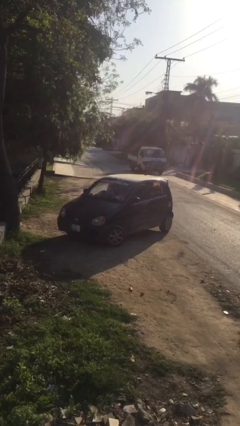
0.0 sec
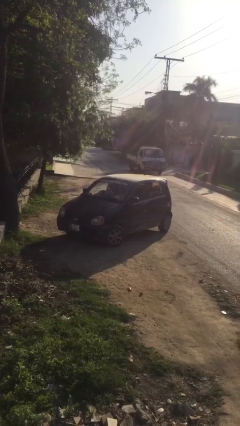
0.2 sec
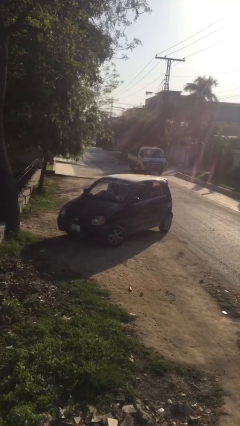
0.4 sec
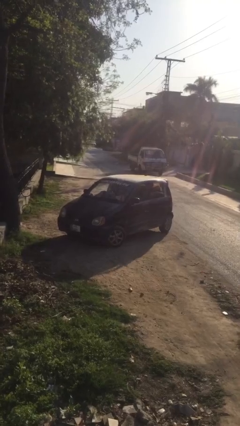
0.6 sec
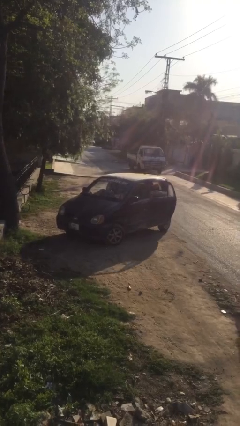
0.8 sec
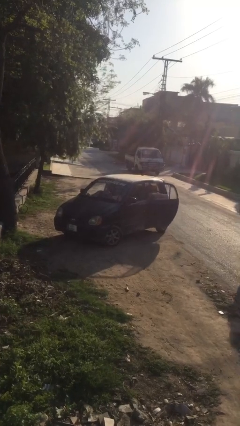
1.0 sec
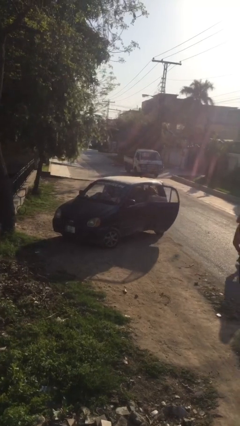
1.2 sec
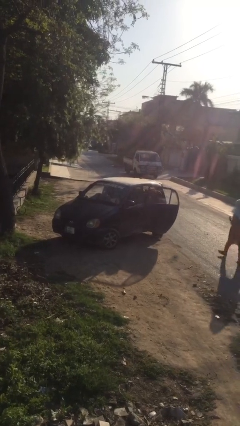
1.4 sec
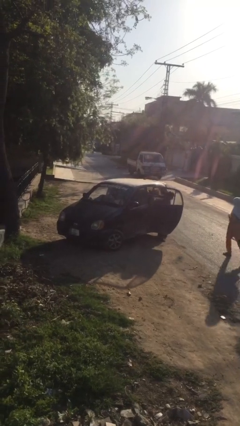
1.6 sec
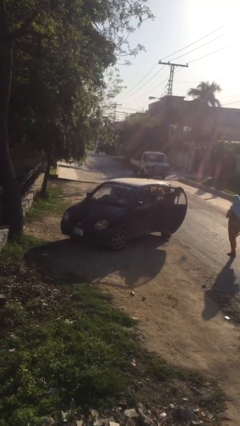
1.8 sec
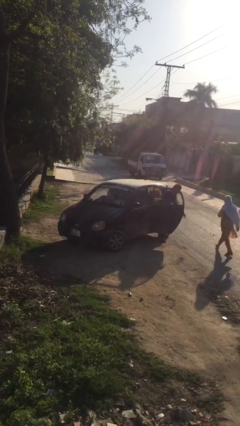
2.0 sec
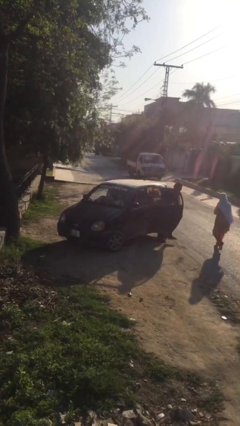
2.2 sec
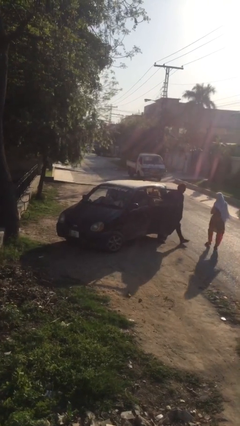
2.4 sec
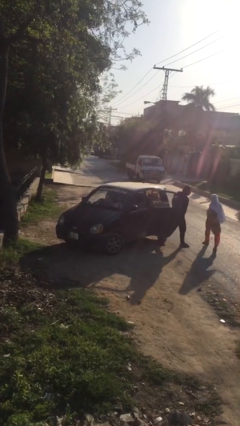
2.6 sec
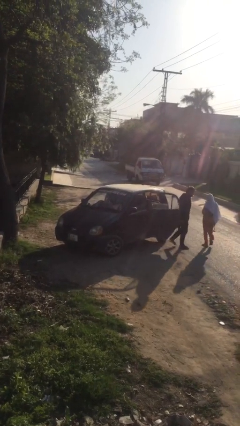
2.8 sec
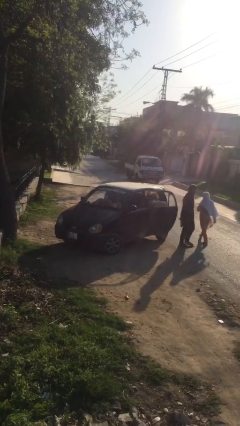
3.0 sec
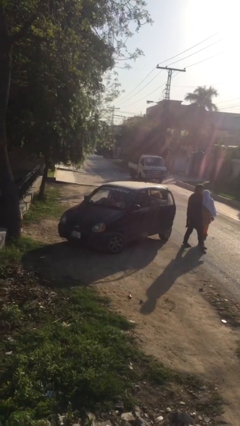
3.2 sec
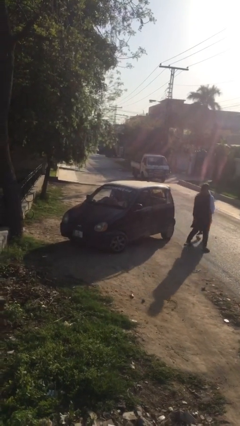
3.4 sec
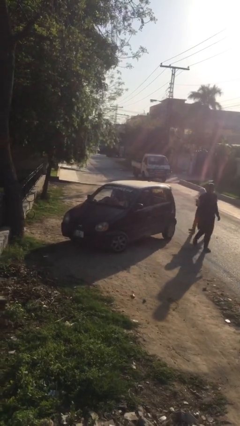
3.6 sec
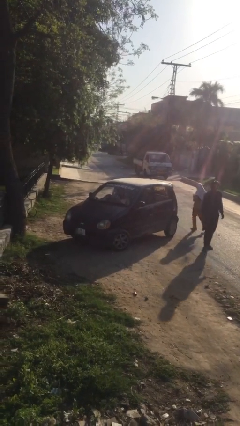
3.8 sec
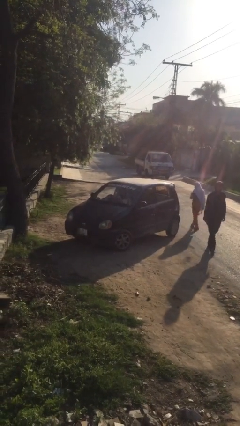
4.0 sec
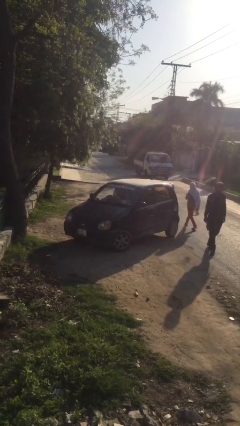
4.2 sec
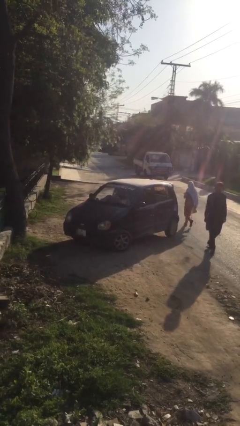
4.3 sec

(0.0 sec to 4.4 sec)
car drops off person

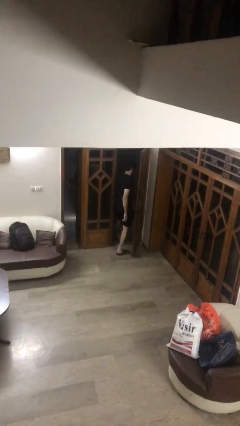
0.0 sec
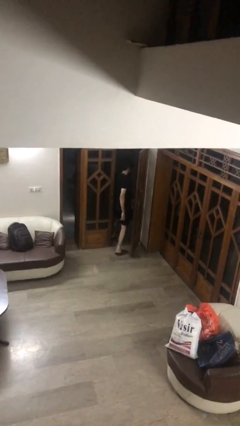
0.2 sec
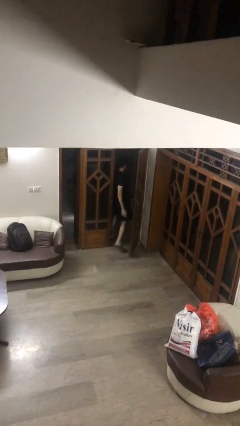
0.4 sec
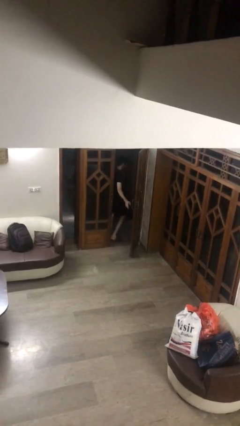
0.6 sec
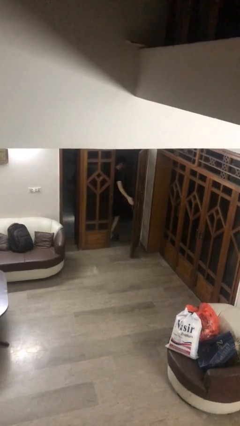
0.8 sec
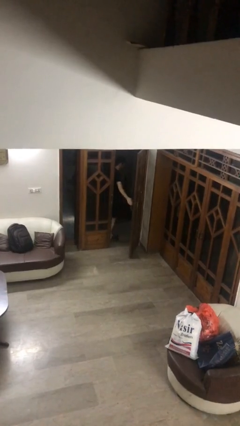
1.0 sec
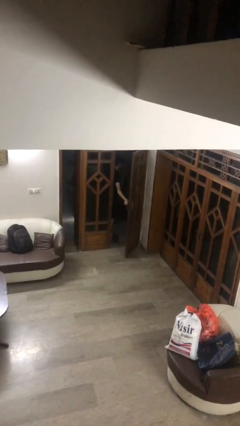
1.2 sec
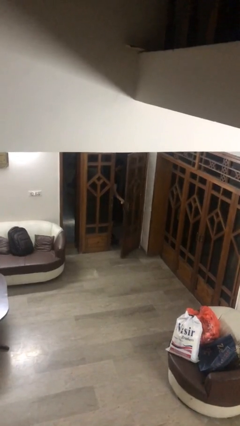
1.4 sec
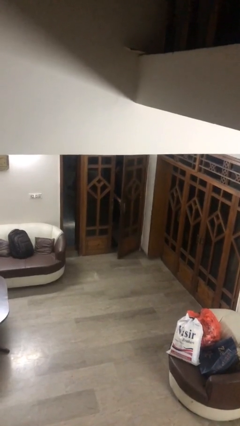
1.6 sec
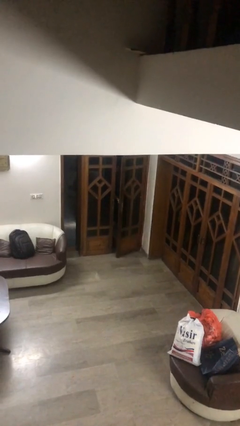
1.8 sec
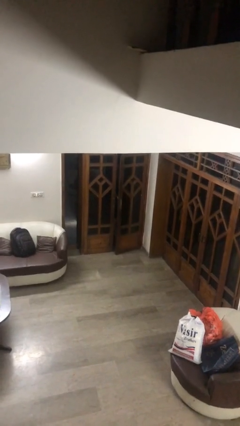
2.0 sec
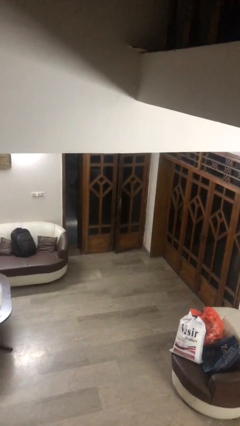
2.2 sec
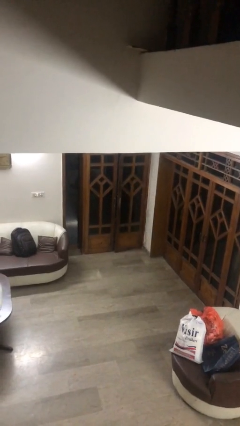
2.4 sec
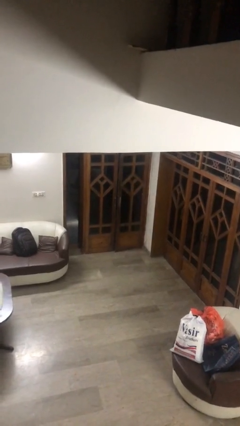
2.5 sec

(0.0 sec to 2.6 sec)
person closes facility door

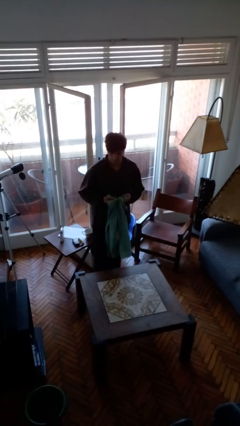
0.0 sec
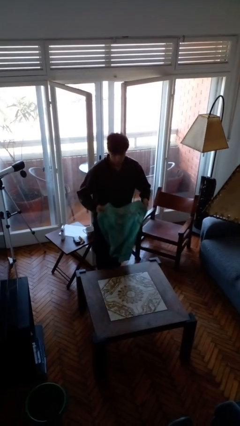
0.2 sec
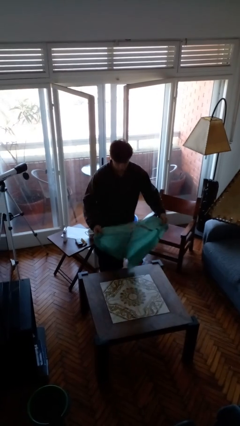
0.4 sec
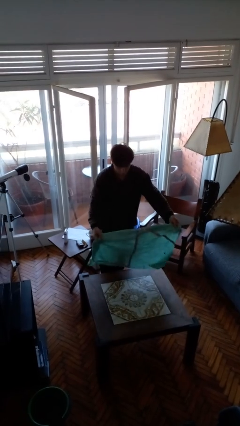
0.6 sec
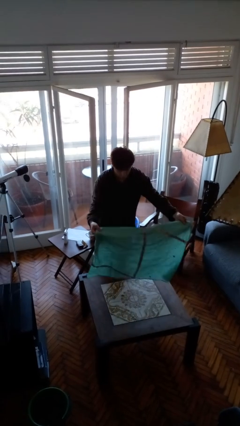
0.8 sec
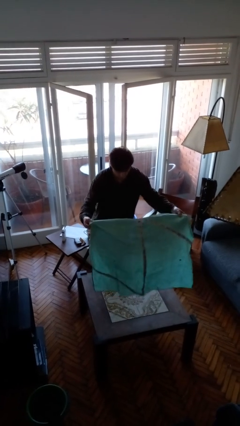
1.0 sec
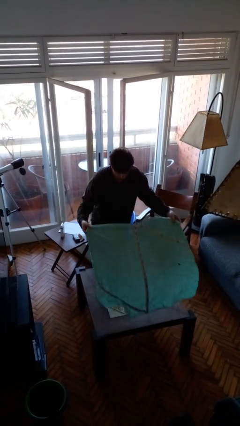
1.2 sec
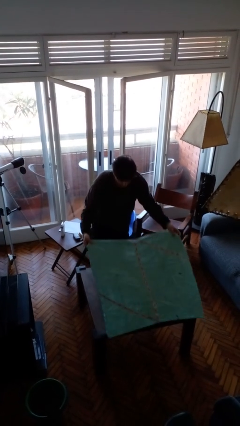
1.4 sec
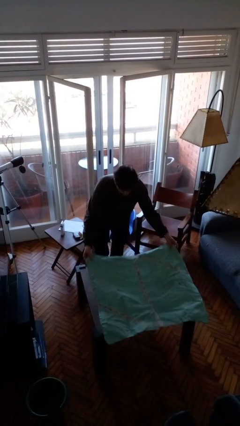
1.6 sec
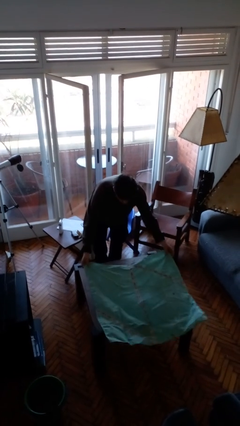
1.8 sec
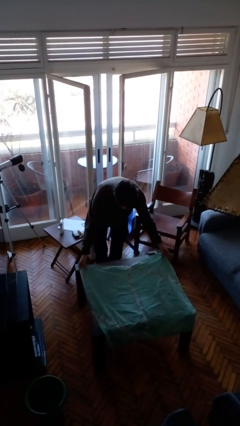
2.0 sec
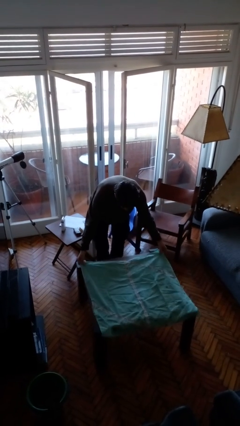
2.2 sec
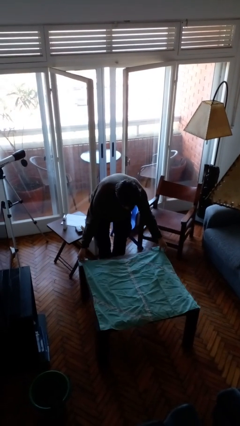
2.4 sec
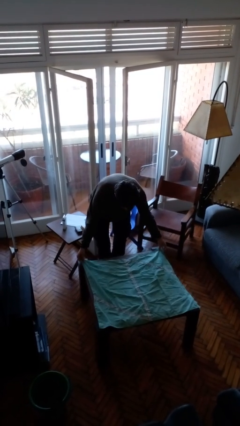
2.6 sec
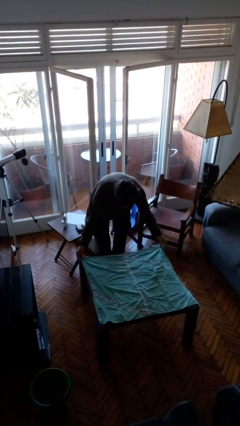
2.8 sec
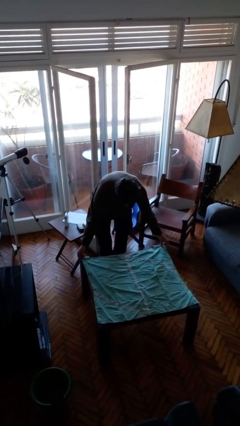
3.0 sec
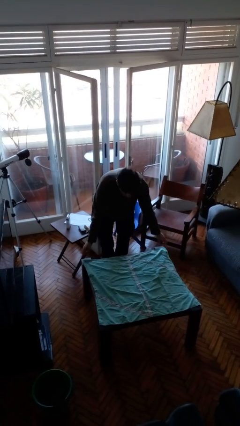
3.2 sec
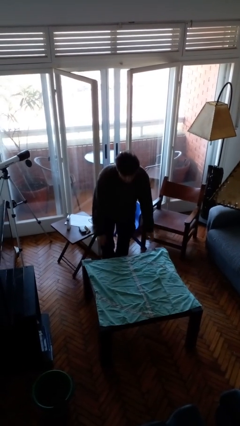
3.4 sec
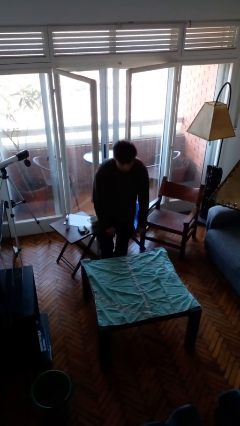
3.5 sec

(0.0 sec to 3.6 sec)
person spreads tablecloth

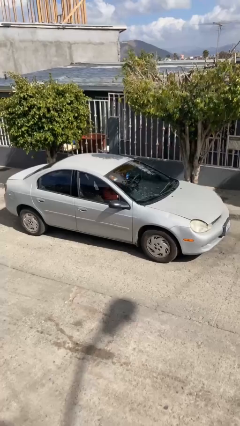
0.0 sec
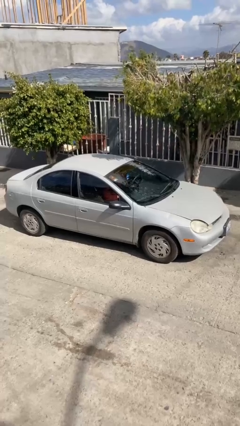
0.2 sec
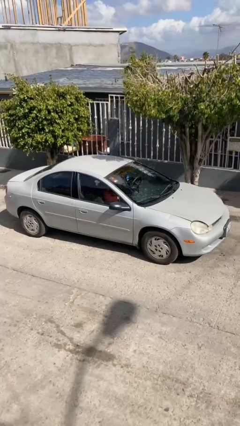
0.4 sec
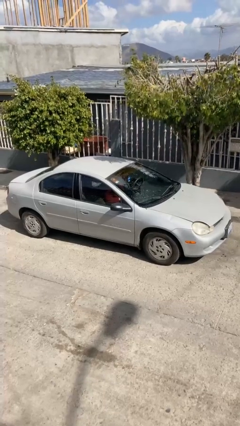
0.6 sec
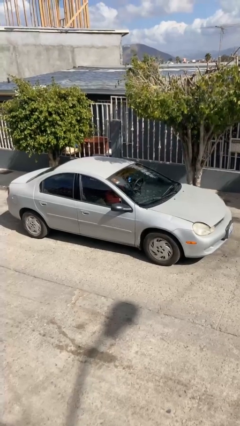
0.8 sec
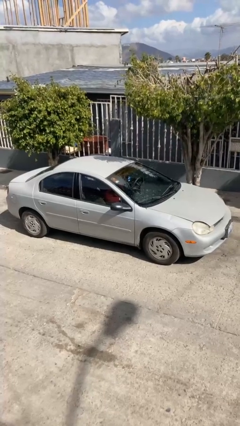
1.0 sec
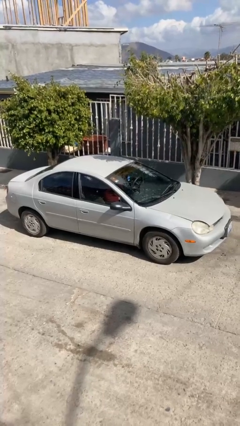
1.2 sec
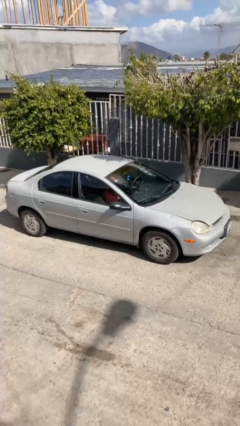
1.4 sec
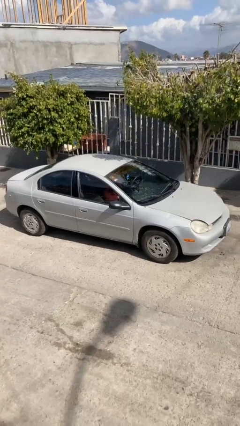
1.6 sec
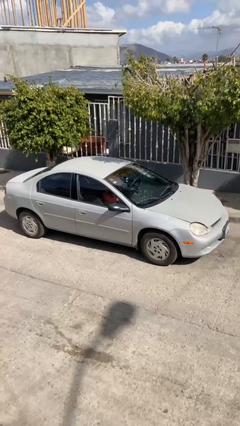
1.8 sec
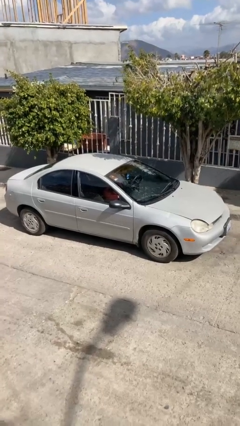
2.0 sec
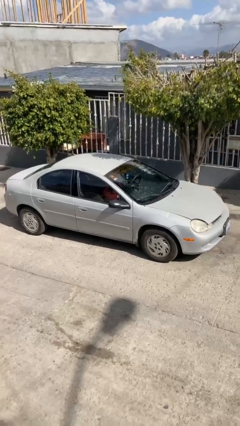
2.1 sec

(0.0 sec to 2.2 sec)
car picks up person

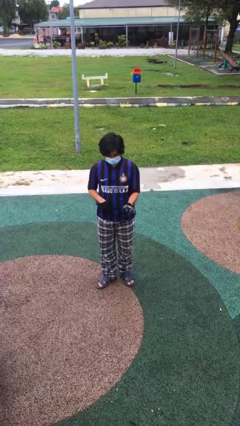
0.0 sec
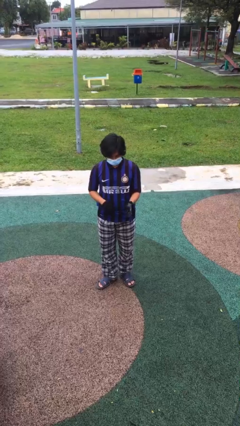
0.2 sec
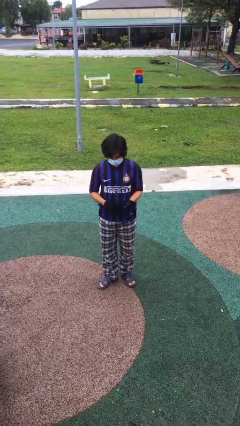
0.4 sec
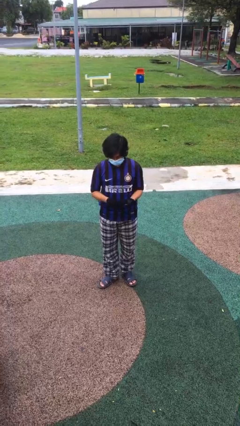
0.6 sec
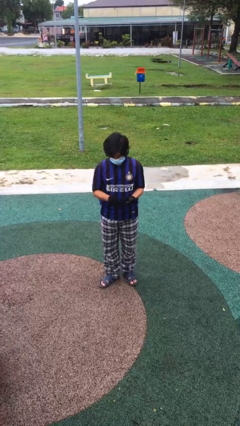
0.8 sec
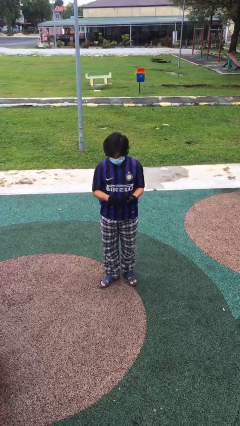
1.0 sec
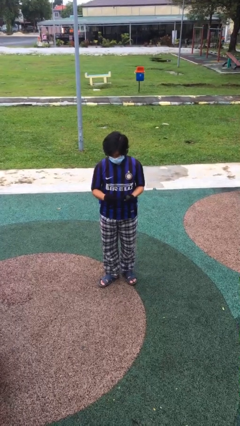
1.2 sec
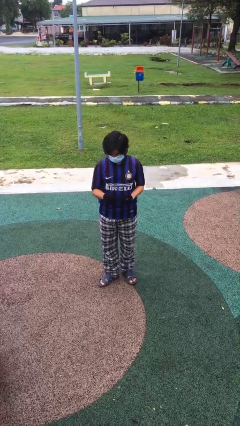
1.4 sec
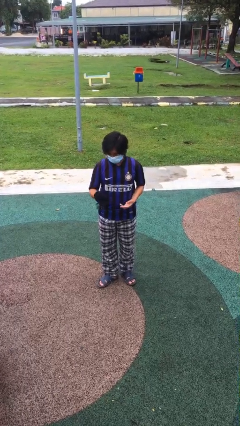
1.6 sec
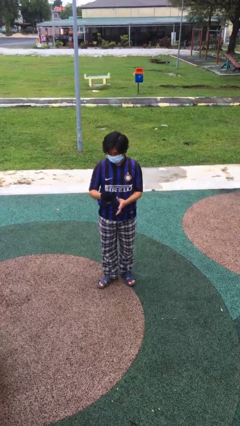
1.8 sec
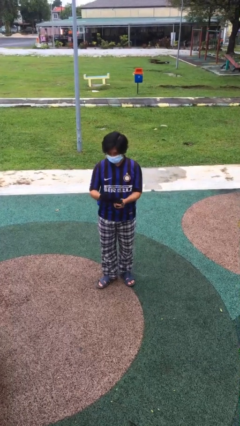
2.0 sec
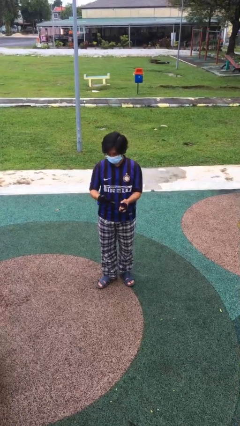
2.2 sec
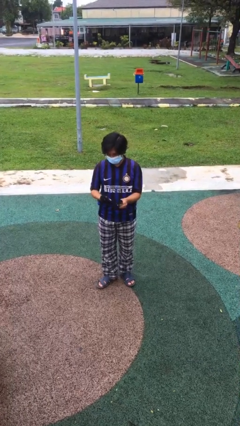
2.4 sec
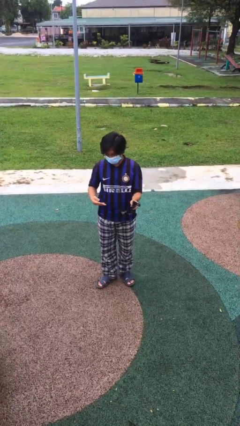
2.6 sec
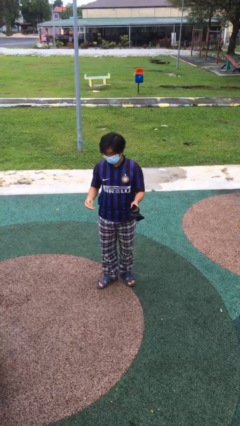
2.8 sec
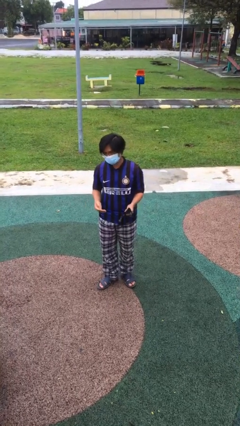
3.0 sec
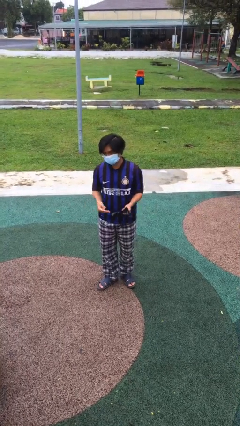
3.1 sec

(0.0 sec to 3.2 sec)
person takes off gloves

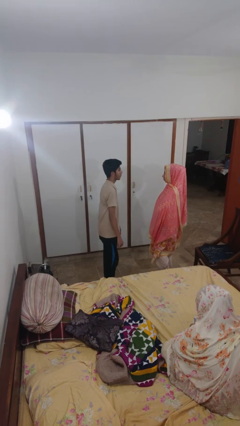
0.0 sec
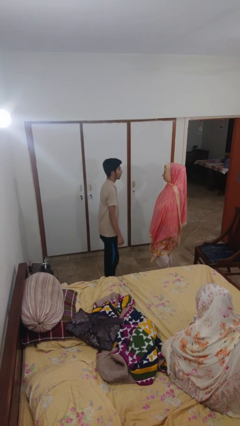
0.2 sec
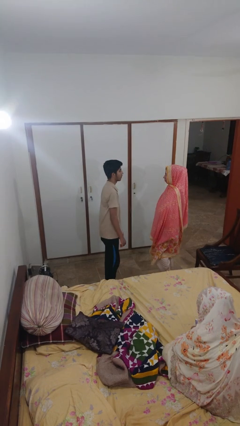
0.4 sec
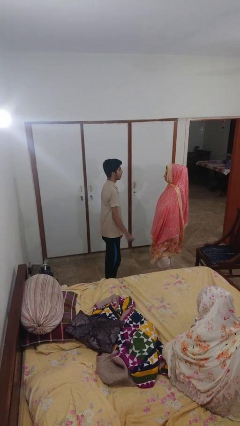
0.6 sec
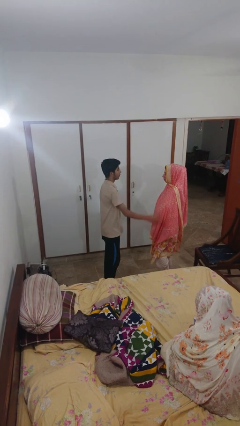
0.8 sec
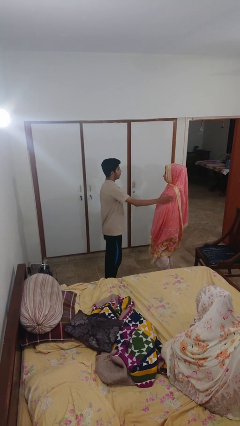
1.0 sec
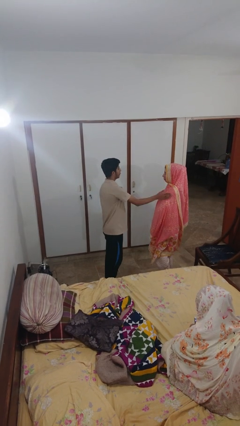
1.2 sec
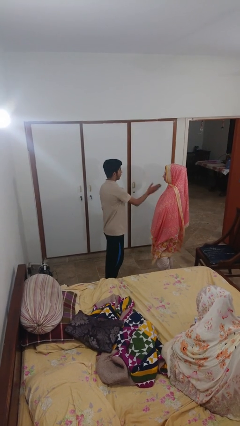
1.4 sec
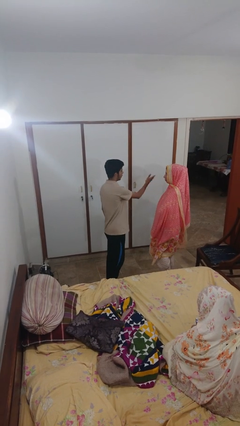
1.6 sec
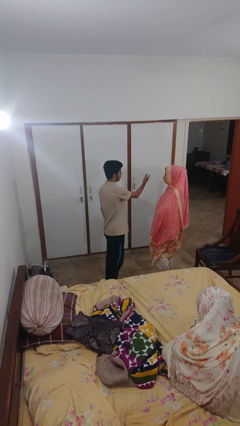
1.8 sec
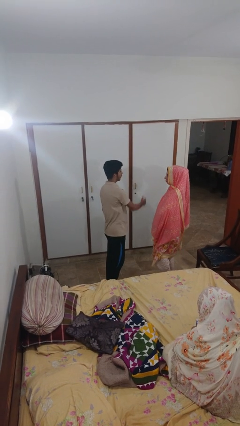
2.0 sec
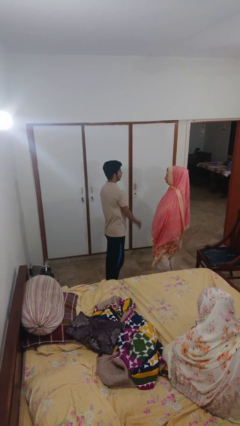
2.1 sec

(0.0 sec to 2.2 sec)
person shoves person
